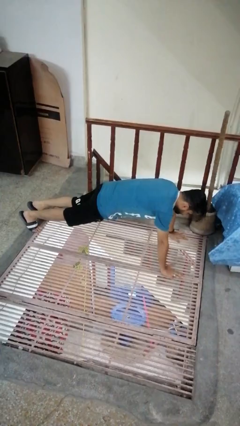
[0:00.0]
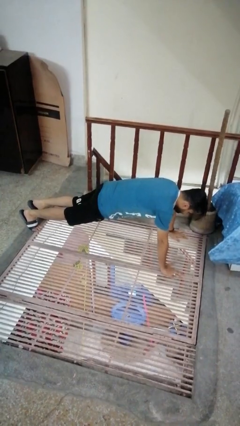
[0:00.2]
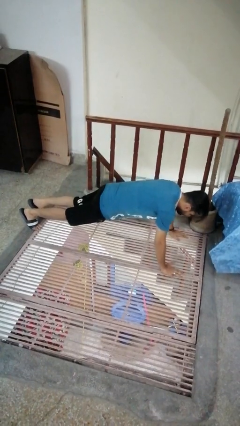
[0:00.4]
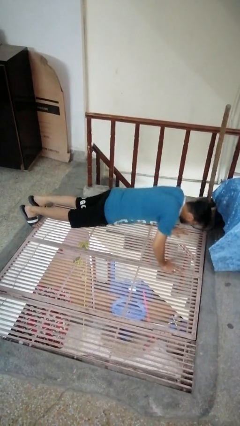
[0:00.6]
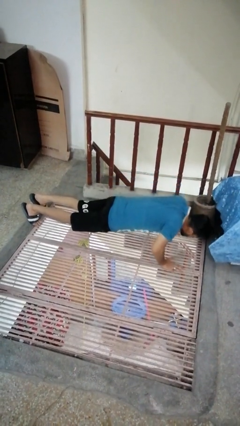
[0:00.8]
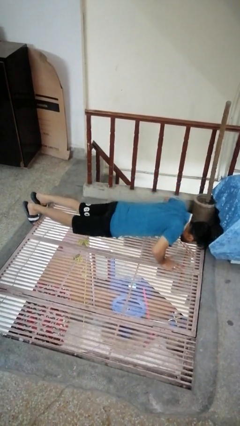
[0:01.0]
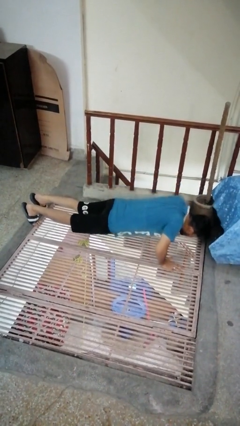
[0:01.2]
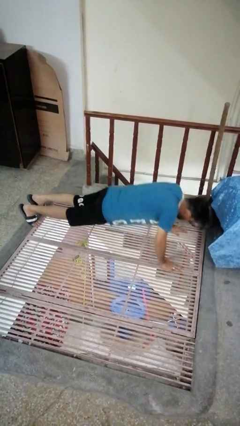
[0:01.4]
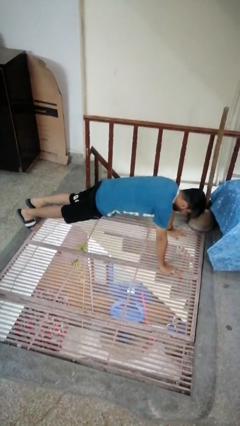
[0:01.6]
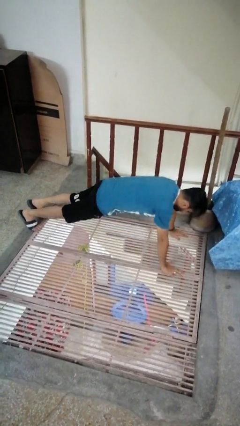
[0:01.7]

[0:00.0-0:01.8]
person exercises with pushup

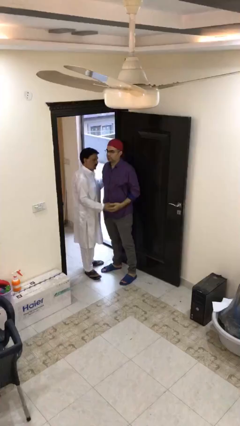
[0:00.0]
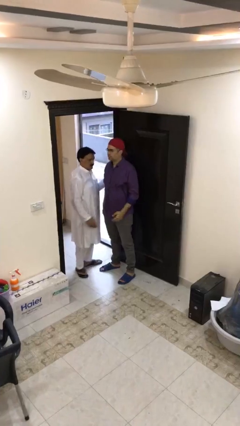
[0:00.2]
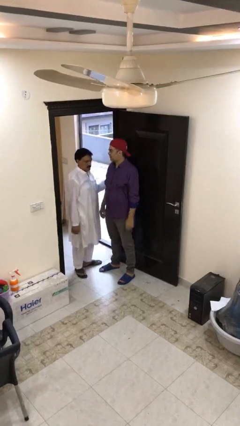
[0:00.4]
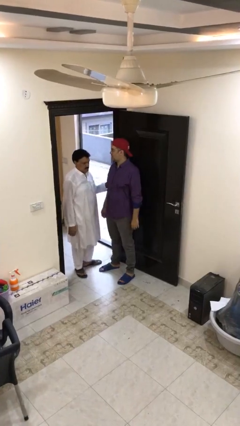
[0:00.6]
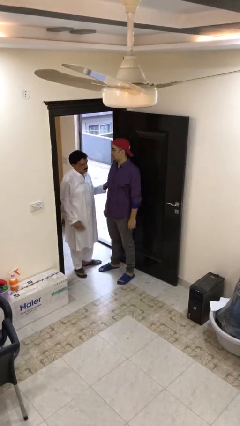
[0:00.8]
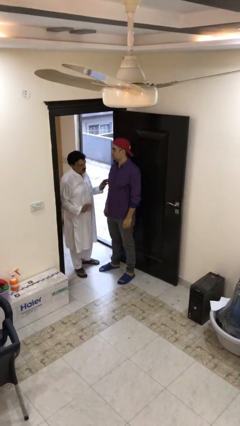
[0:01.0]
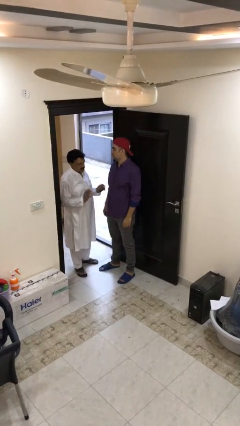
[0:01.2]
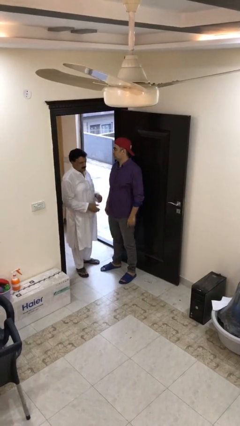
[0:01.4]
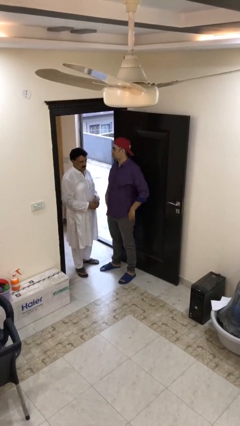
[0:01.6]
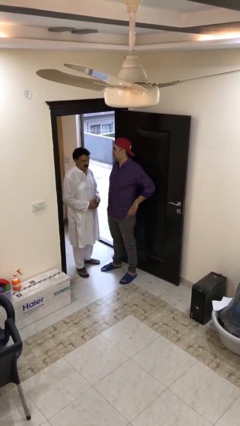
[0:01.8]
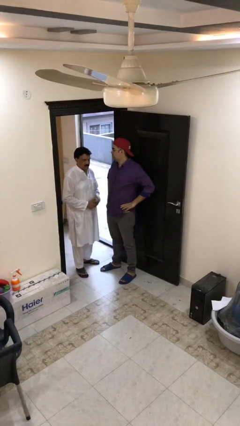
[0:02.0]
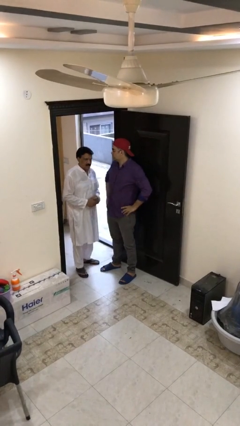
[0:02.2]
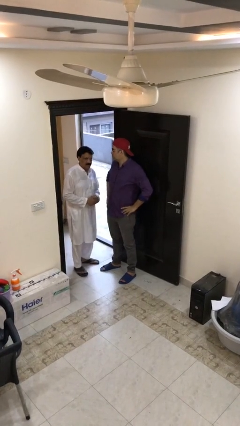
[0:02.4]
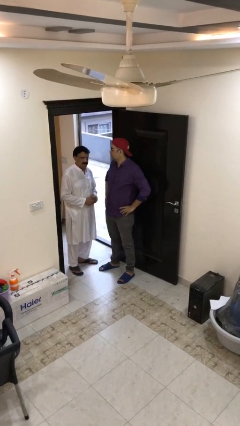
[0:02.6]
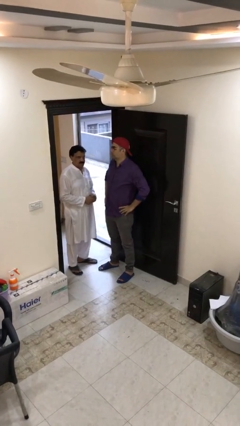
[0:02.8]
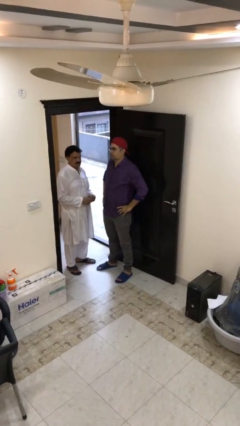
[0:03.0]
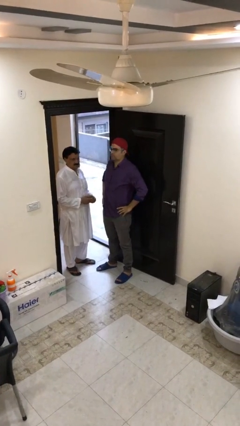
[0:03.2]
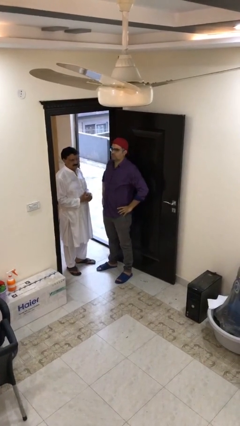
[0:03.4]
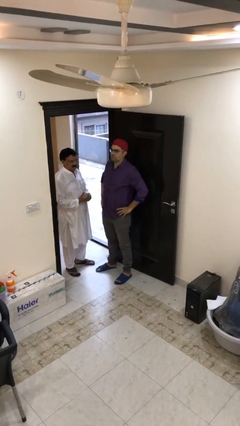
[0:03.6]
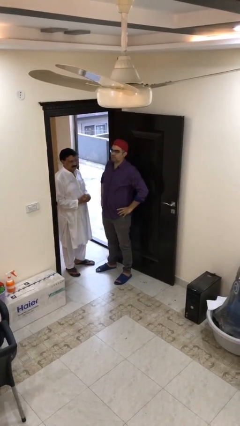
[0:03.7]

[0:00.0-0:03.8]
person talks to person

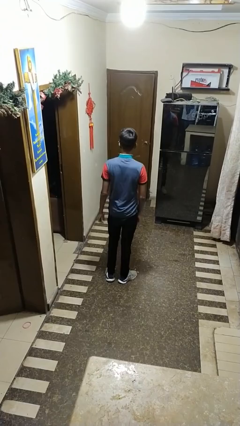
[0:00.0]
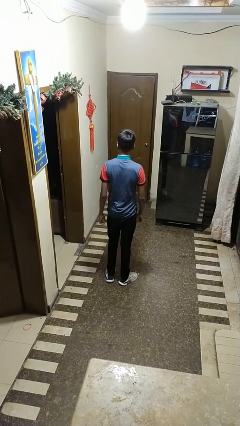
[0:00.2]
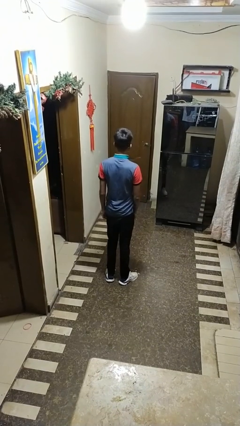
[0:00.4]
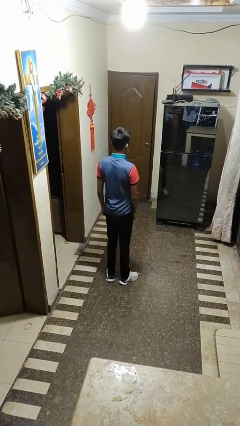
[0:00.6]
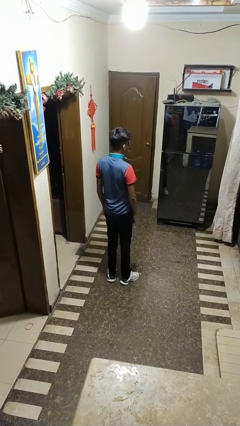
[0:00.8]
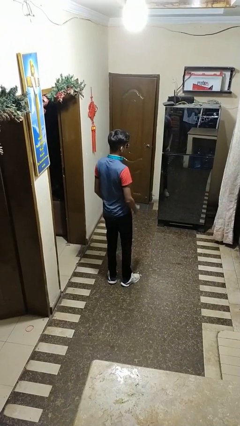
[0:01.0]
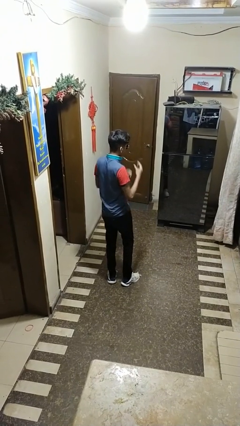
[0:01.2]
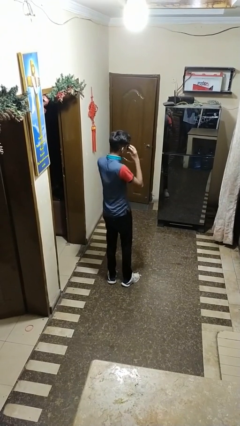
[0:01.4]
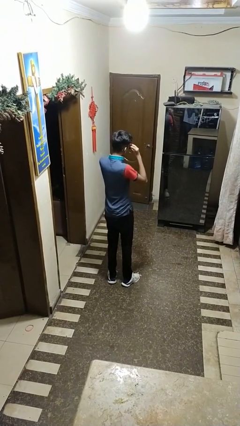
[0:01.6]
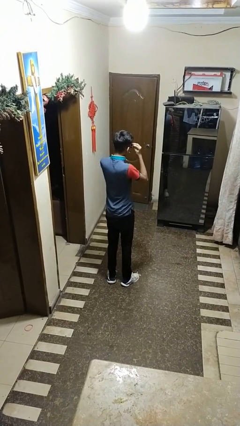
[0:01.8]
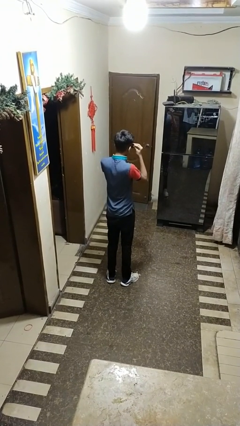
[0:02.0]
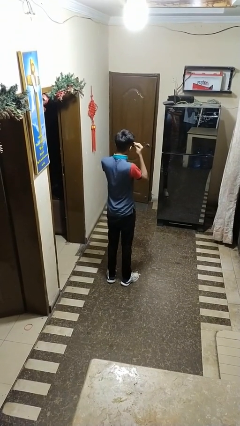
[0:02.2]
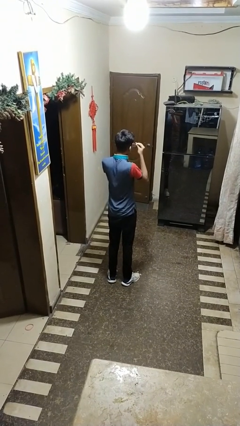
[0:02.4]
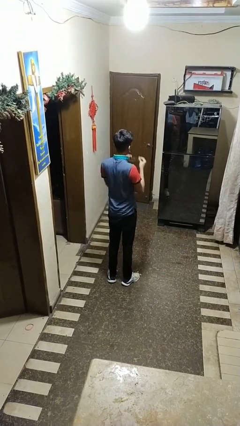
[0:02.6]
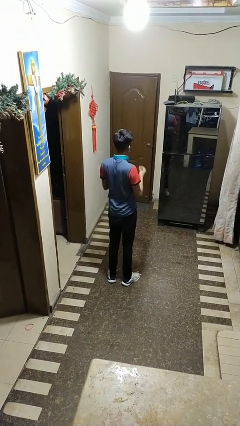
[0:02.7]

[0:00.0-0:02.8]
person takes off sunglasses

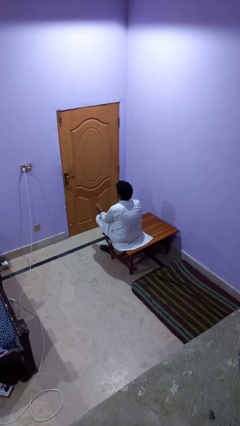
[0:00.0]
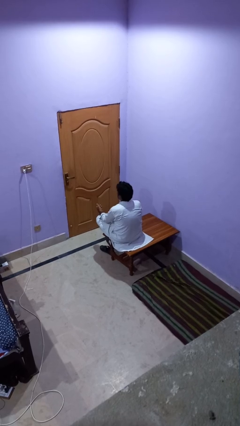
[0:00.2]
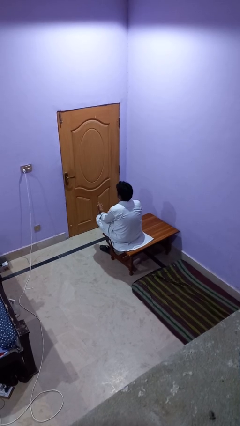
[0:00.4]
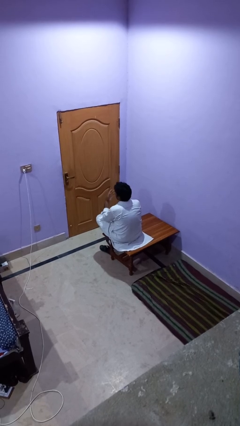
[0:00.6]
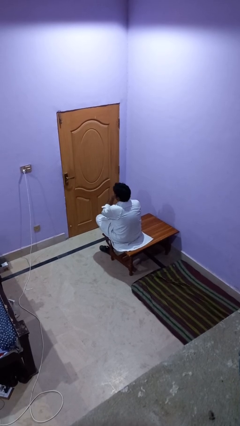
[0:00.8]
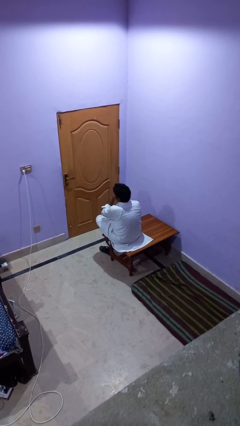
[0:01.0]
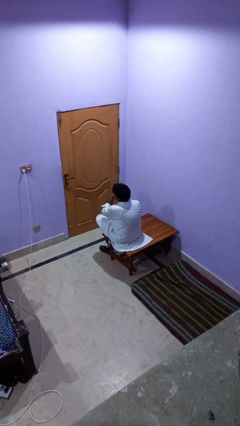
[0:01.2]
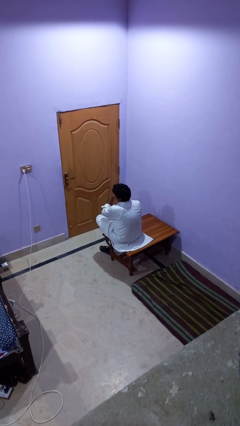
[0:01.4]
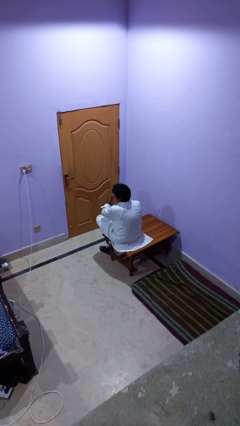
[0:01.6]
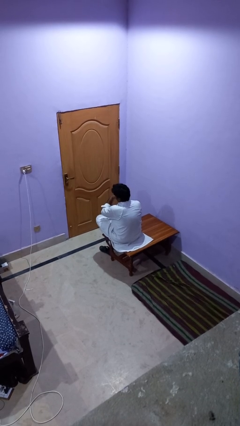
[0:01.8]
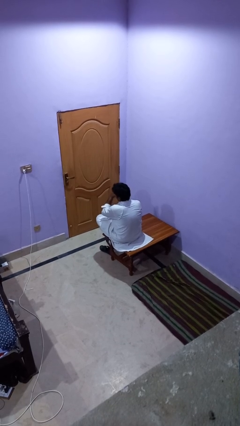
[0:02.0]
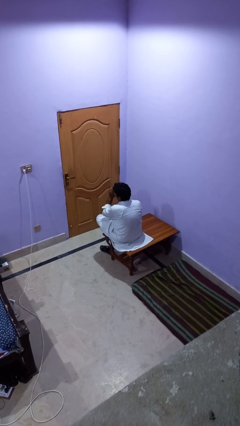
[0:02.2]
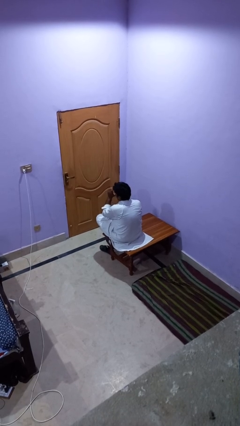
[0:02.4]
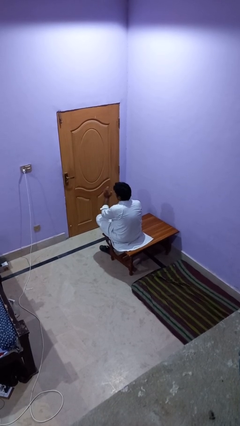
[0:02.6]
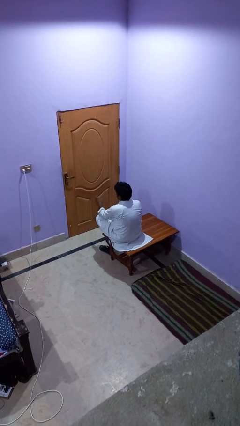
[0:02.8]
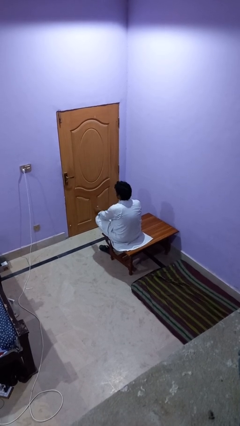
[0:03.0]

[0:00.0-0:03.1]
person licks fingers

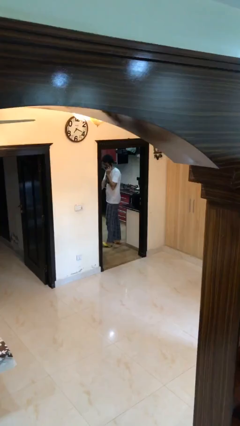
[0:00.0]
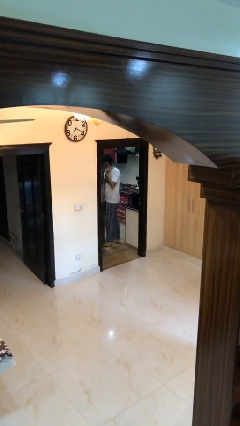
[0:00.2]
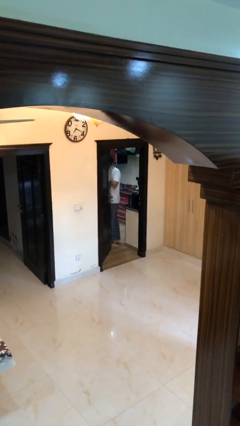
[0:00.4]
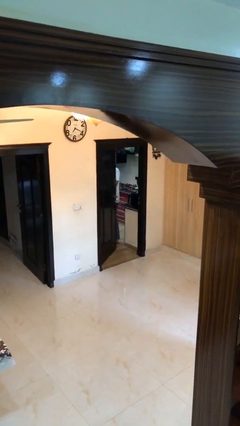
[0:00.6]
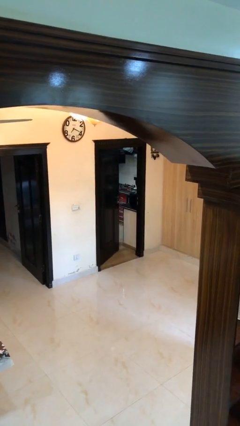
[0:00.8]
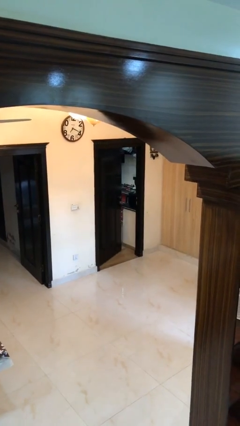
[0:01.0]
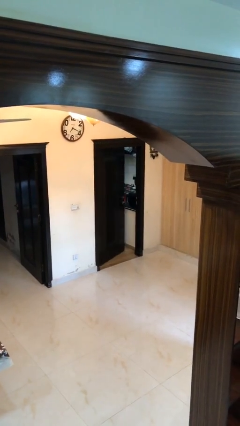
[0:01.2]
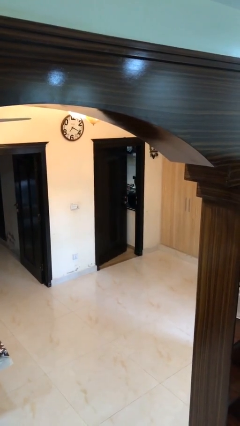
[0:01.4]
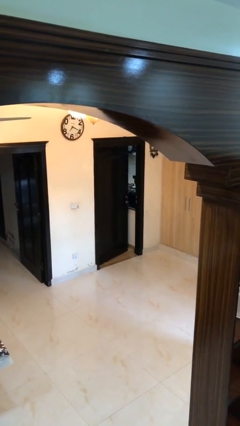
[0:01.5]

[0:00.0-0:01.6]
person closes facility door

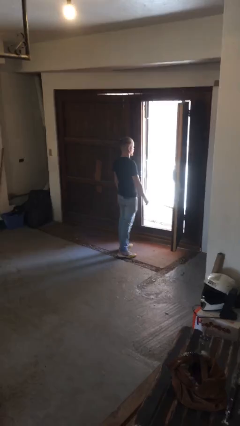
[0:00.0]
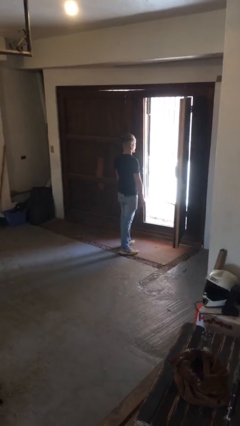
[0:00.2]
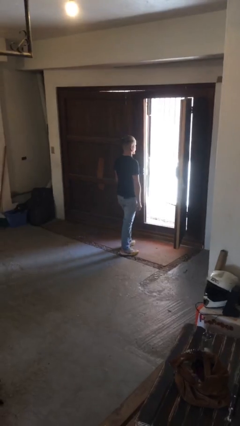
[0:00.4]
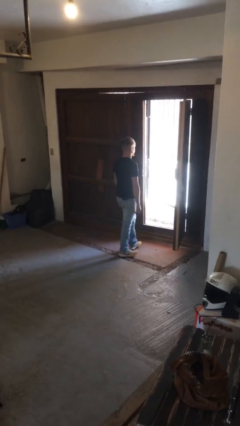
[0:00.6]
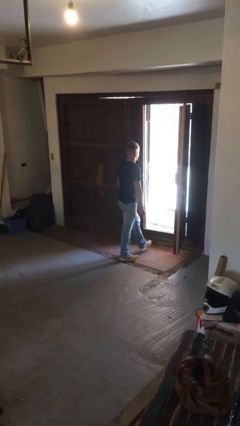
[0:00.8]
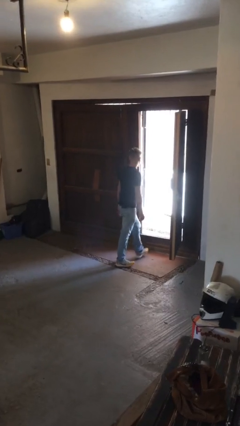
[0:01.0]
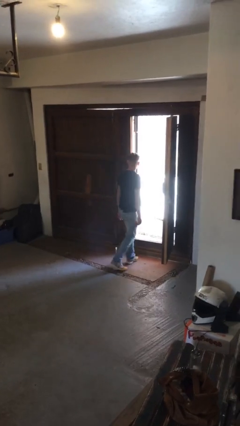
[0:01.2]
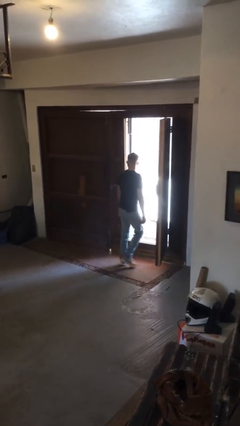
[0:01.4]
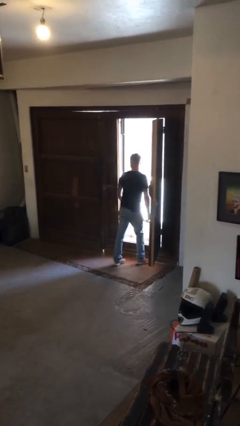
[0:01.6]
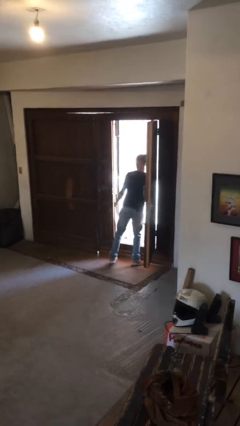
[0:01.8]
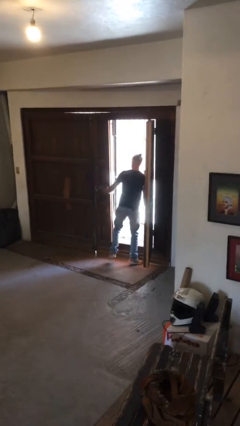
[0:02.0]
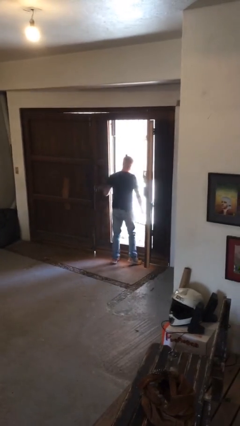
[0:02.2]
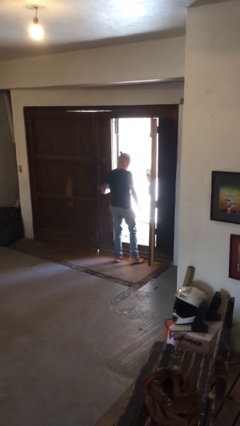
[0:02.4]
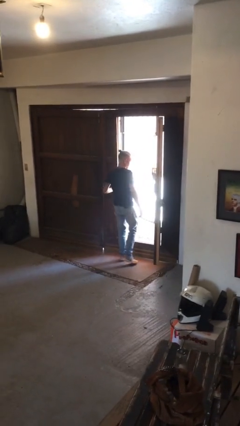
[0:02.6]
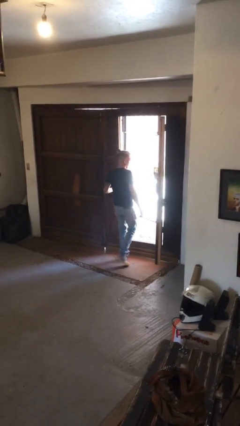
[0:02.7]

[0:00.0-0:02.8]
person bumps into wall

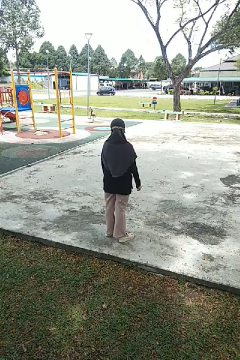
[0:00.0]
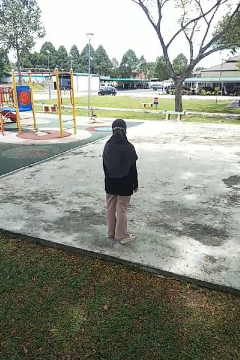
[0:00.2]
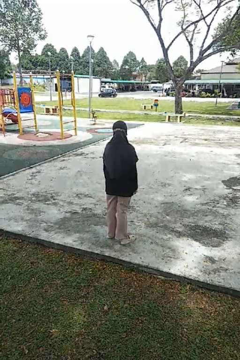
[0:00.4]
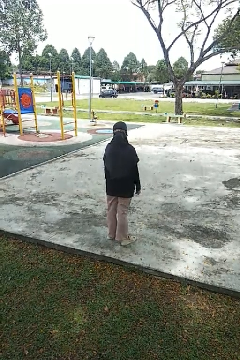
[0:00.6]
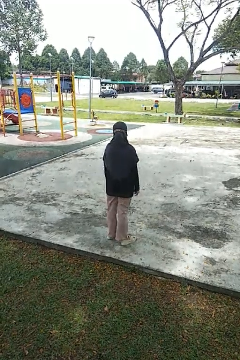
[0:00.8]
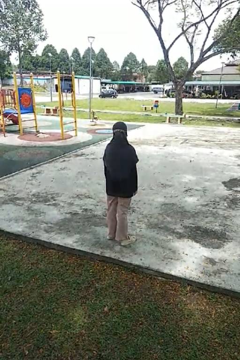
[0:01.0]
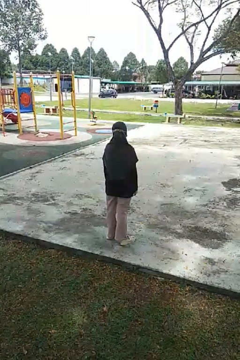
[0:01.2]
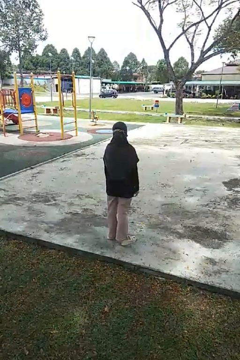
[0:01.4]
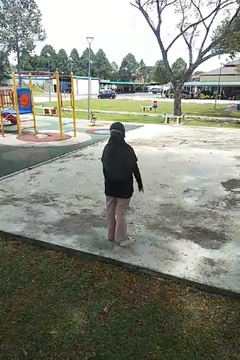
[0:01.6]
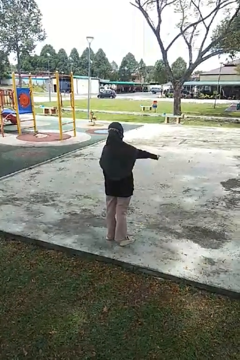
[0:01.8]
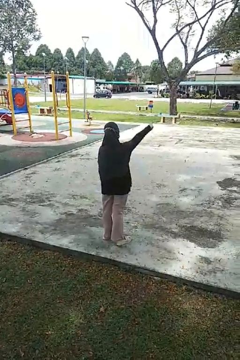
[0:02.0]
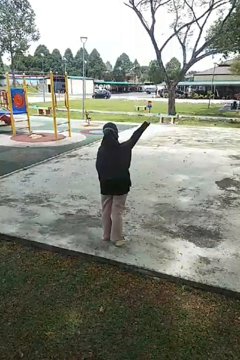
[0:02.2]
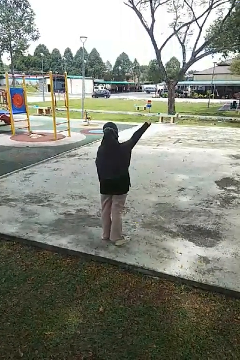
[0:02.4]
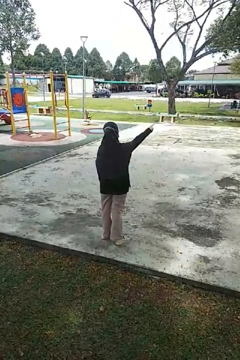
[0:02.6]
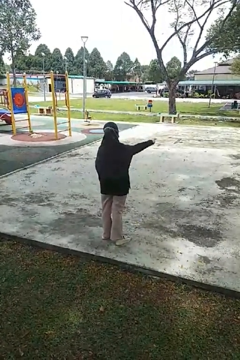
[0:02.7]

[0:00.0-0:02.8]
person points at person
